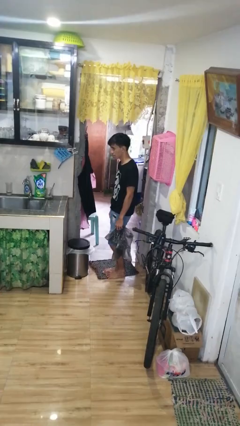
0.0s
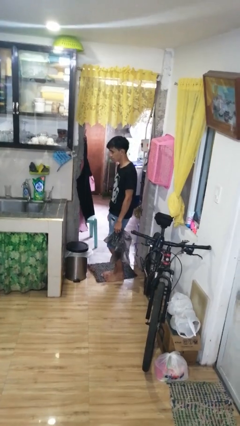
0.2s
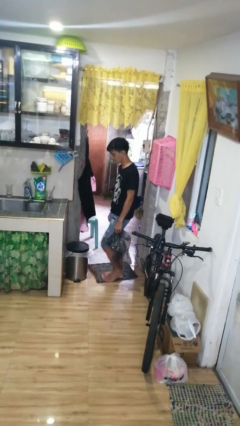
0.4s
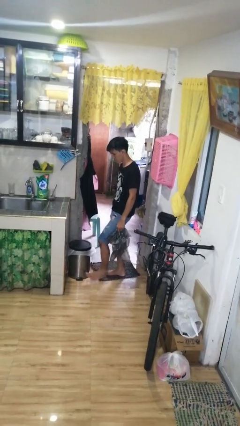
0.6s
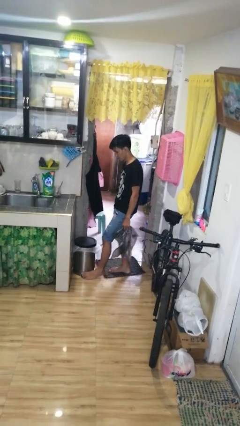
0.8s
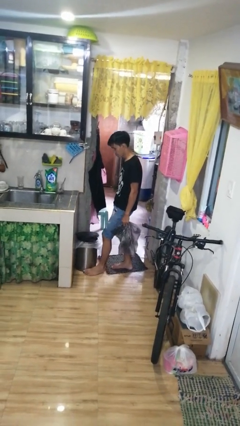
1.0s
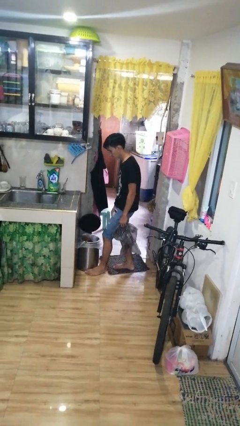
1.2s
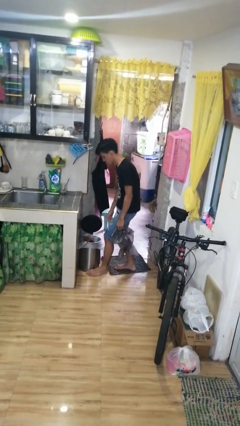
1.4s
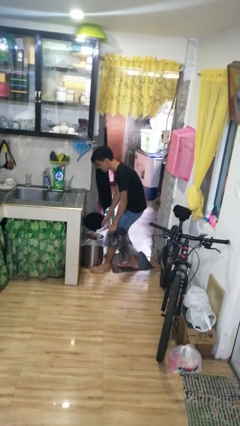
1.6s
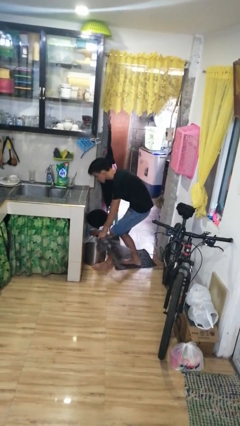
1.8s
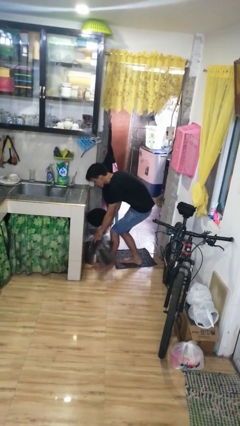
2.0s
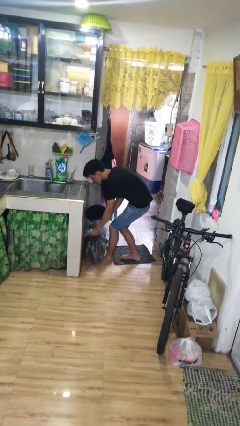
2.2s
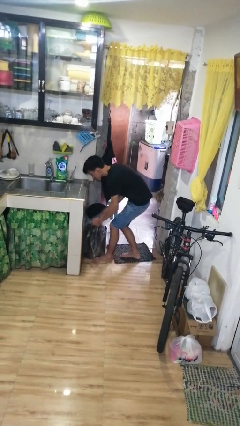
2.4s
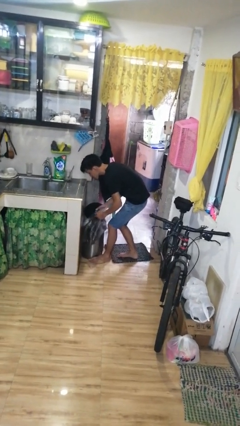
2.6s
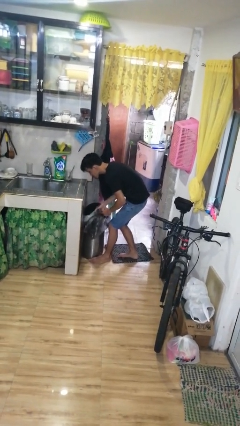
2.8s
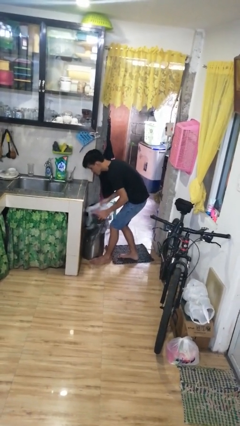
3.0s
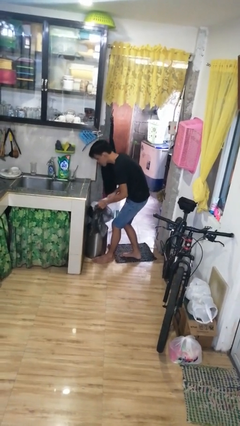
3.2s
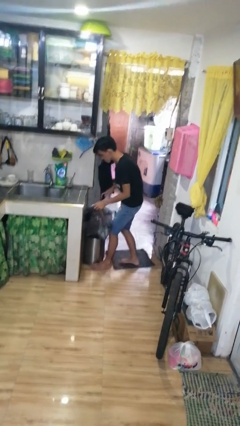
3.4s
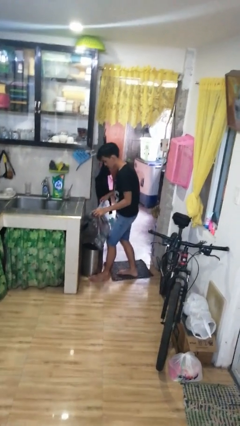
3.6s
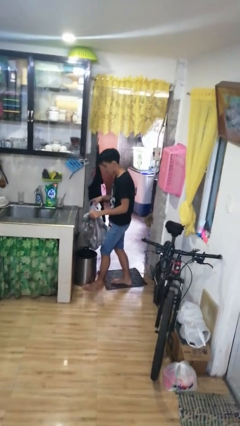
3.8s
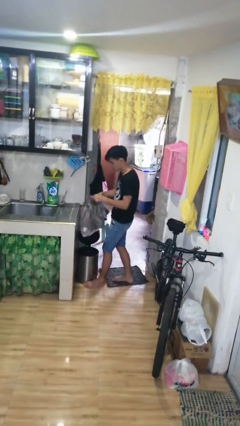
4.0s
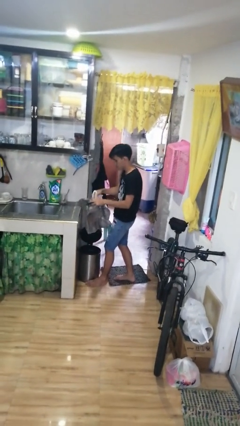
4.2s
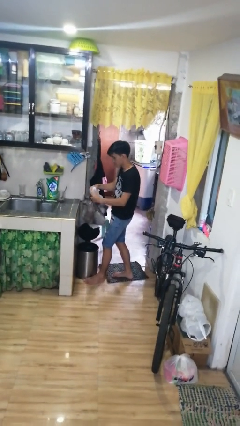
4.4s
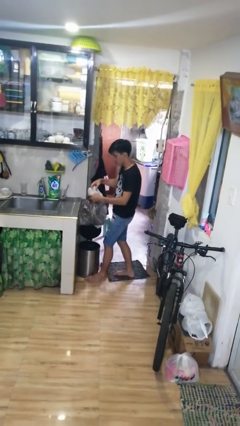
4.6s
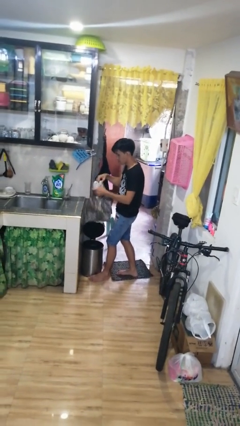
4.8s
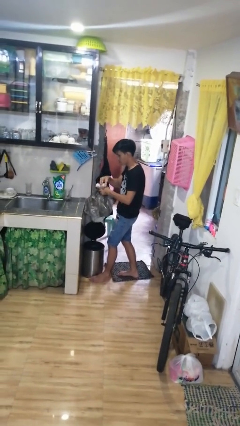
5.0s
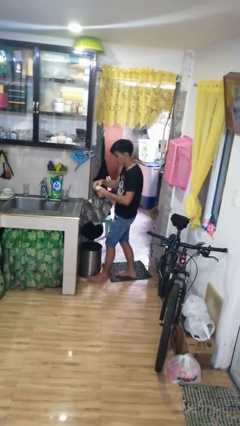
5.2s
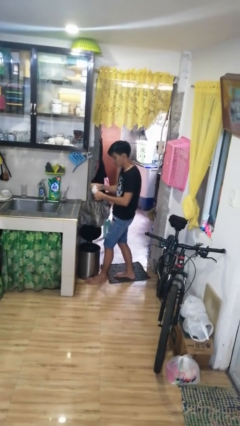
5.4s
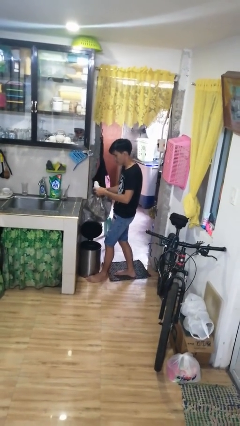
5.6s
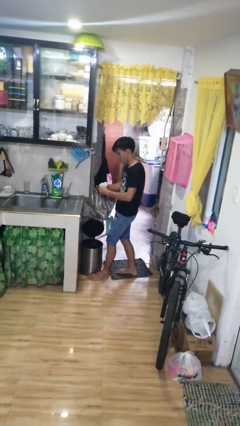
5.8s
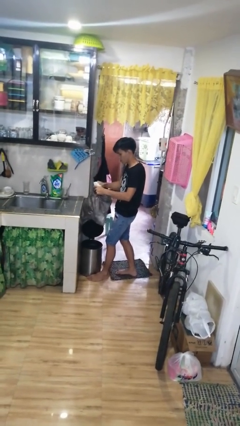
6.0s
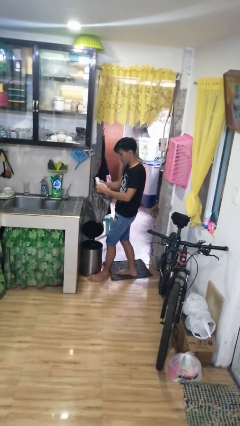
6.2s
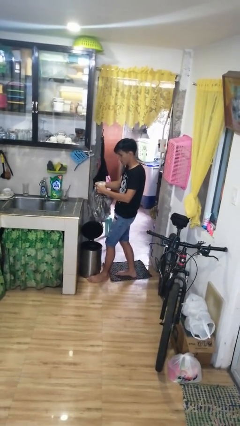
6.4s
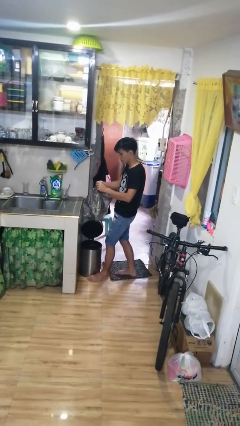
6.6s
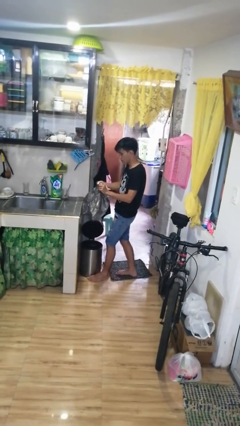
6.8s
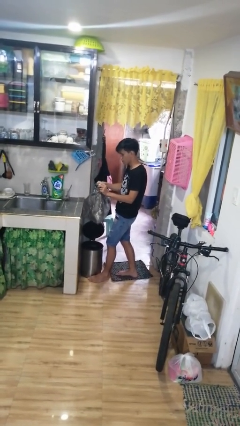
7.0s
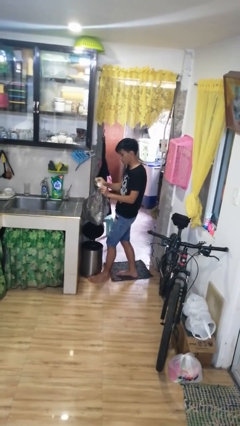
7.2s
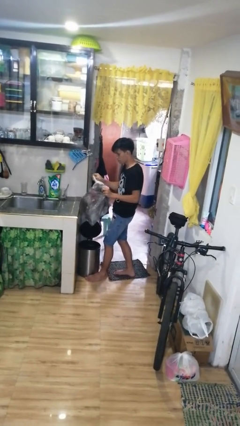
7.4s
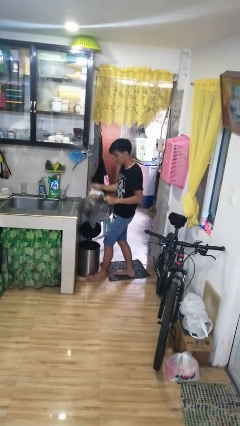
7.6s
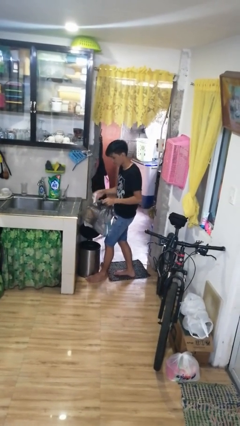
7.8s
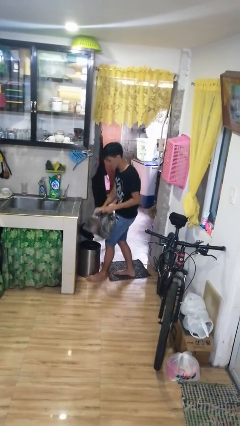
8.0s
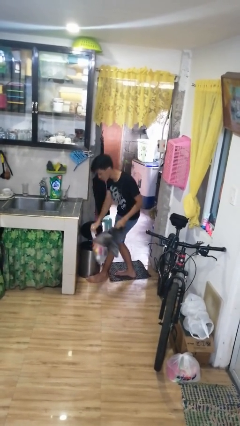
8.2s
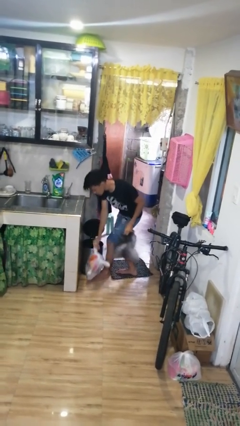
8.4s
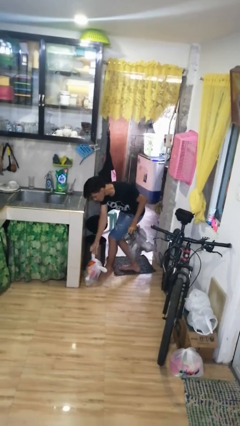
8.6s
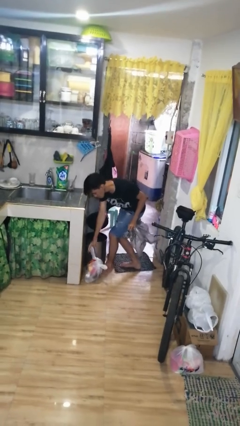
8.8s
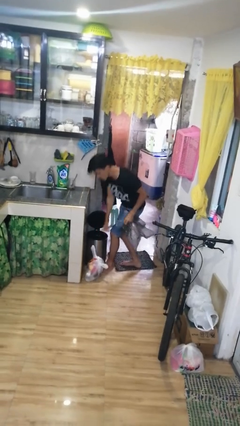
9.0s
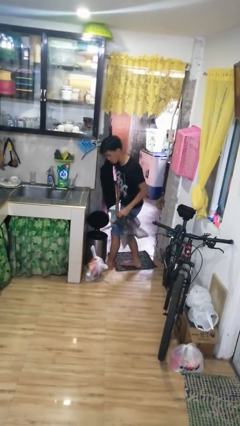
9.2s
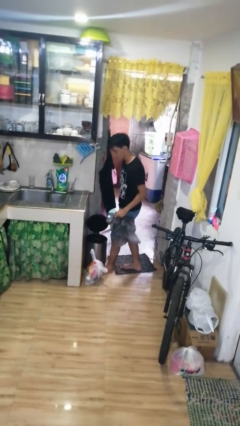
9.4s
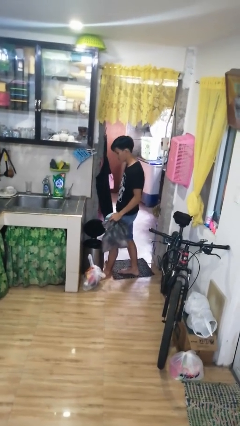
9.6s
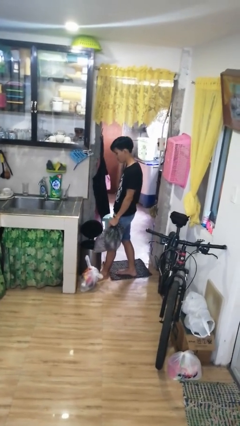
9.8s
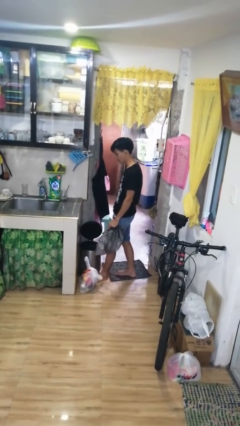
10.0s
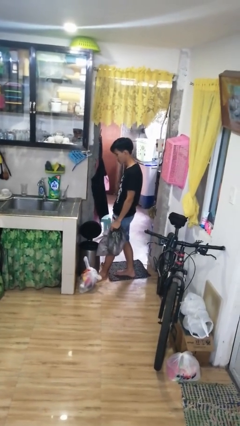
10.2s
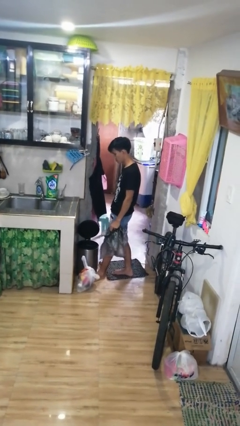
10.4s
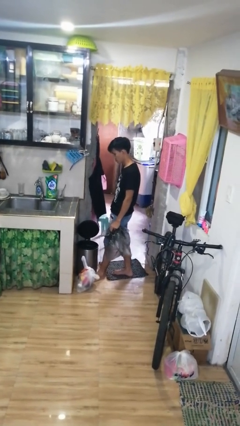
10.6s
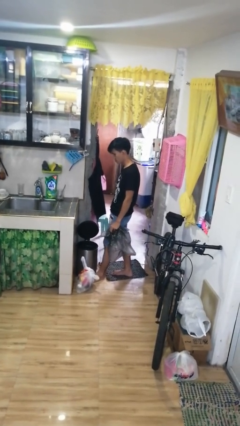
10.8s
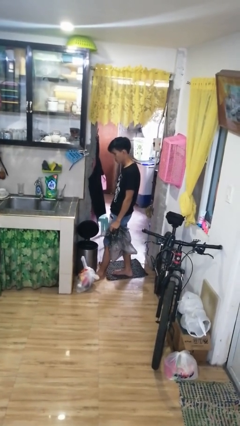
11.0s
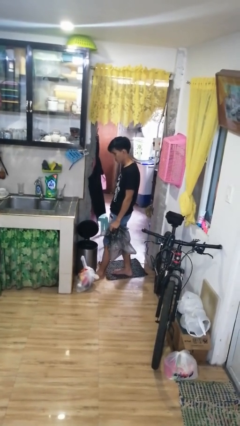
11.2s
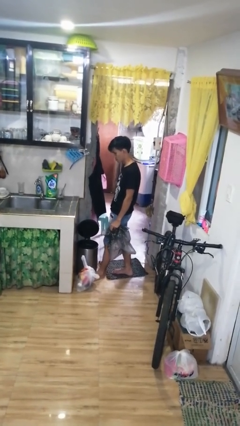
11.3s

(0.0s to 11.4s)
person removes trashbag from trashcan

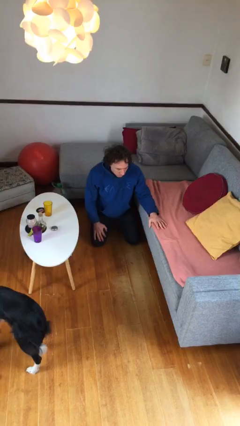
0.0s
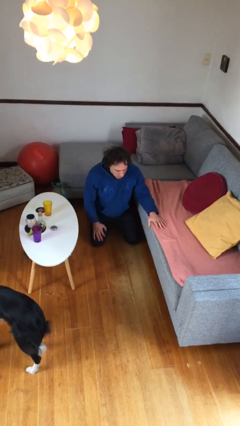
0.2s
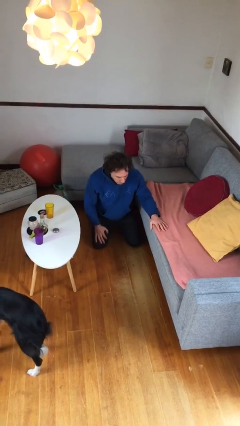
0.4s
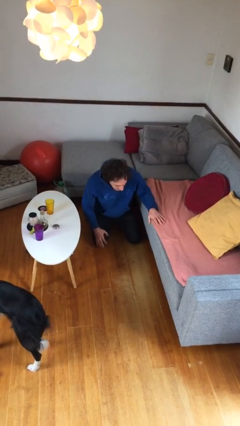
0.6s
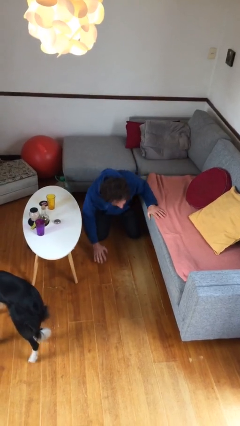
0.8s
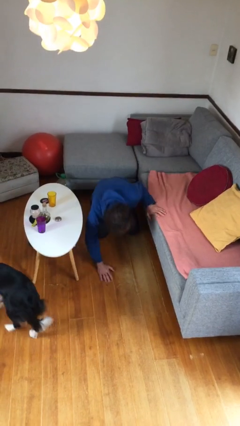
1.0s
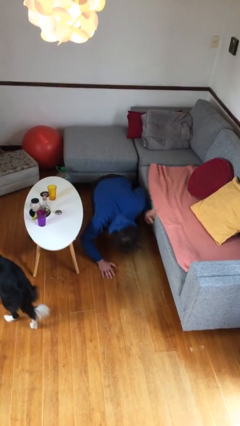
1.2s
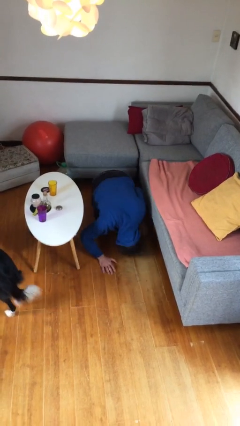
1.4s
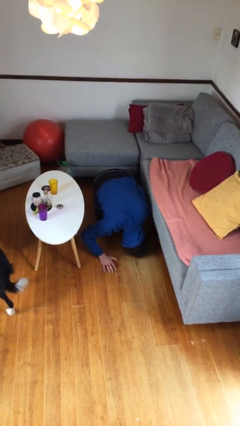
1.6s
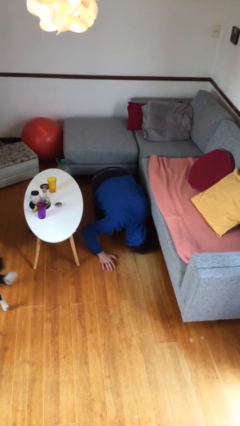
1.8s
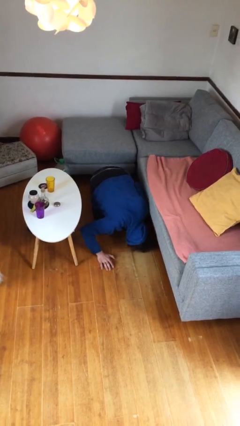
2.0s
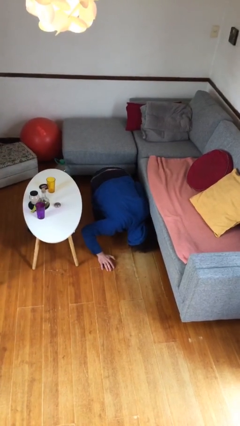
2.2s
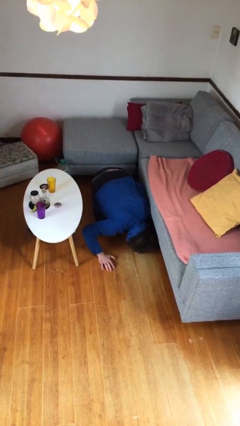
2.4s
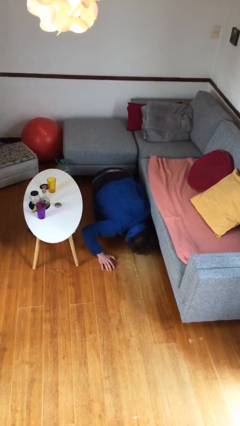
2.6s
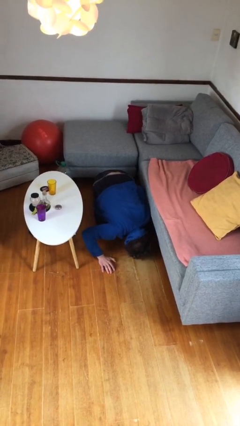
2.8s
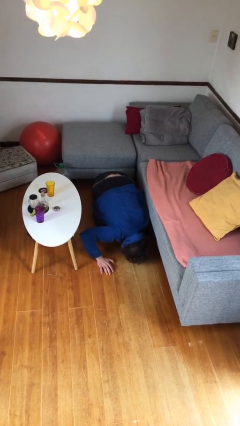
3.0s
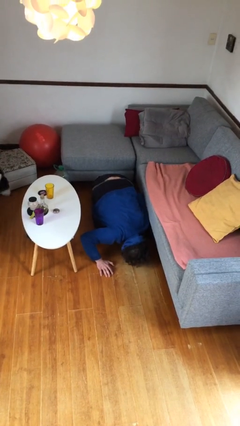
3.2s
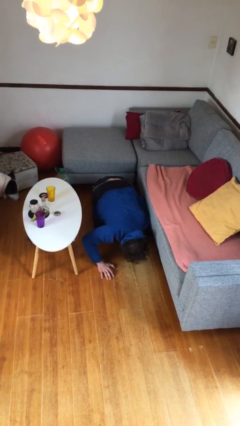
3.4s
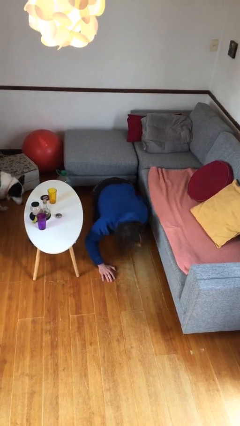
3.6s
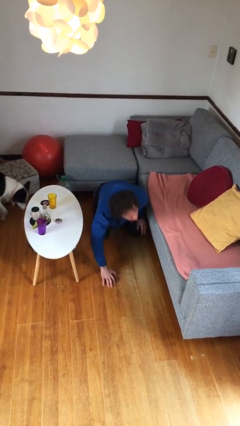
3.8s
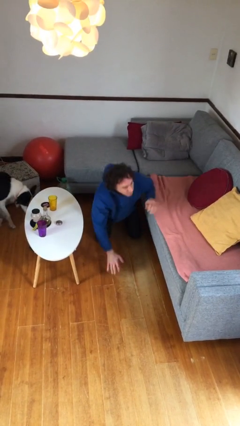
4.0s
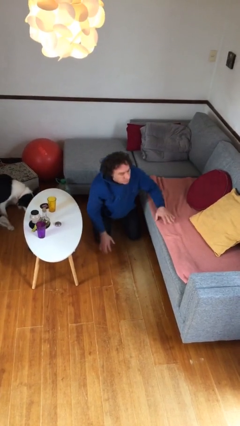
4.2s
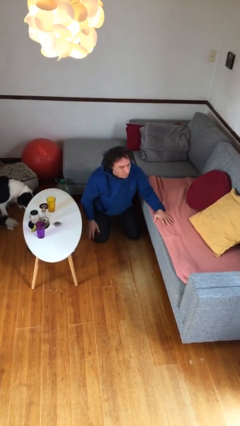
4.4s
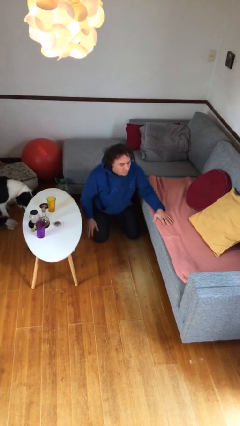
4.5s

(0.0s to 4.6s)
person searches under couch

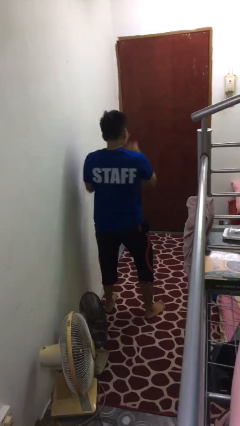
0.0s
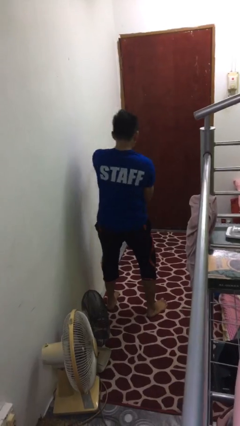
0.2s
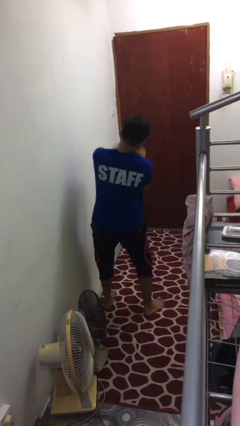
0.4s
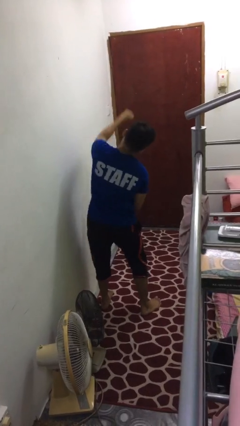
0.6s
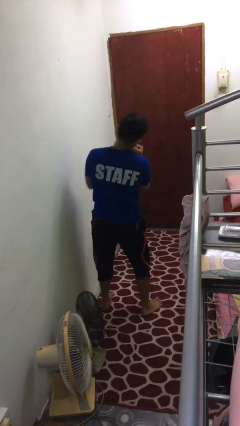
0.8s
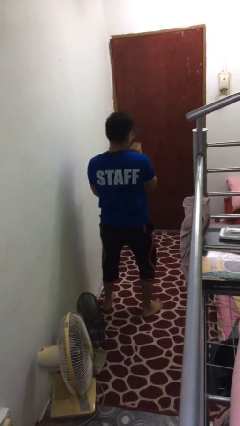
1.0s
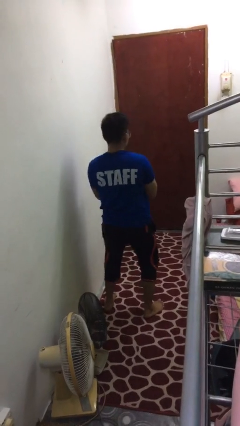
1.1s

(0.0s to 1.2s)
person punches

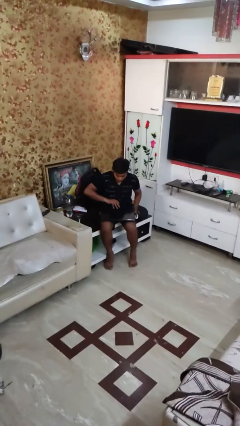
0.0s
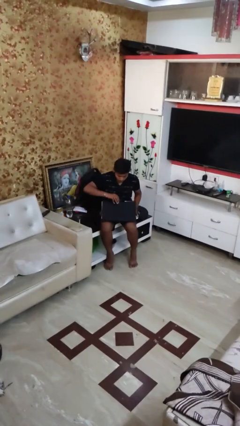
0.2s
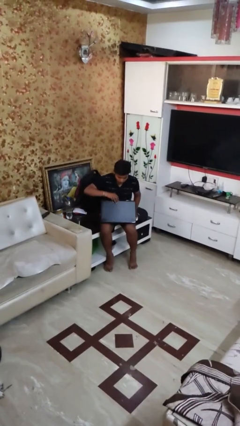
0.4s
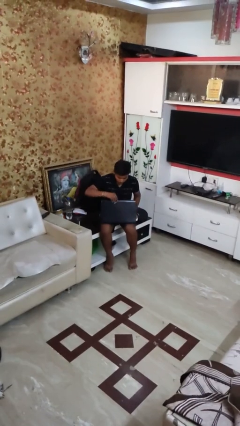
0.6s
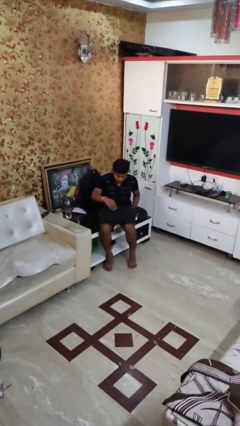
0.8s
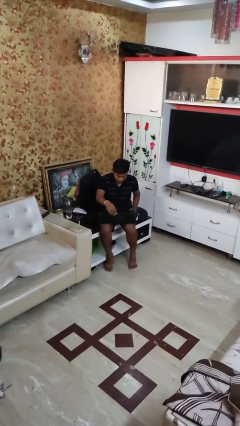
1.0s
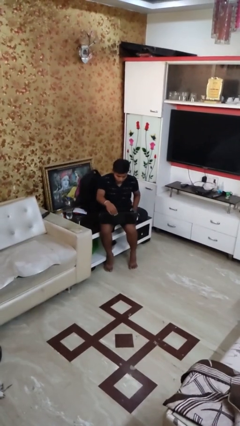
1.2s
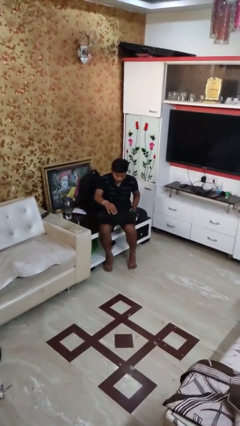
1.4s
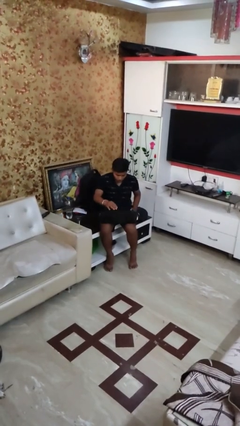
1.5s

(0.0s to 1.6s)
person opens laptop
